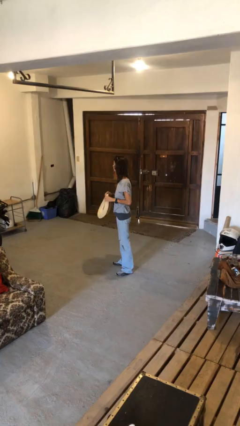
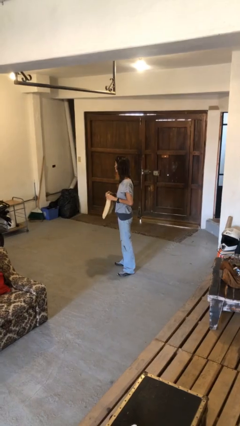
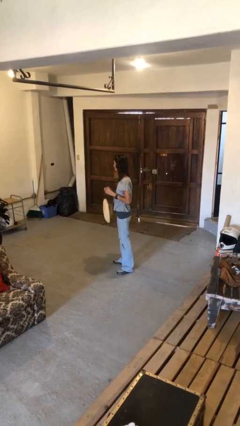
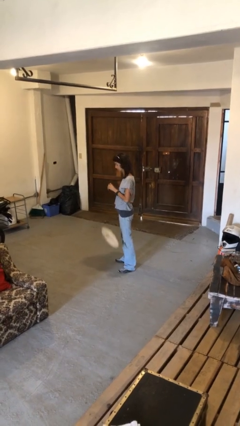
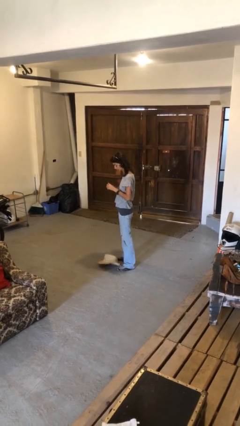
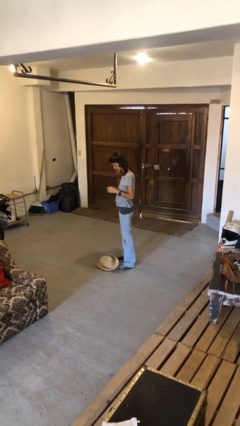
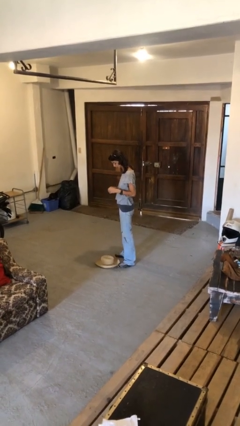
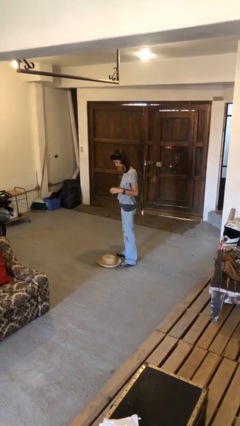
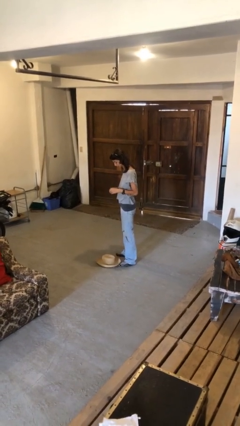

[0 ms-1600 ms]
person drops object

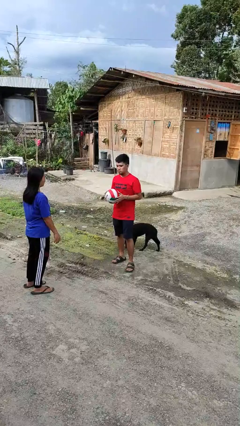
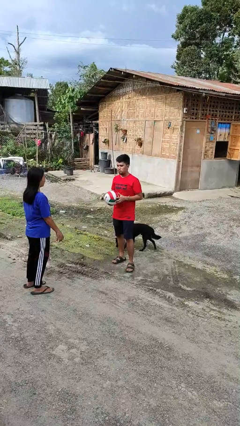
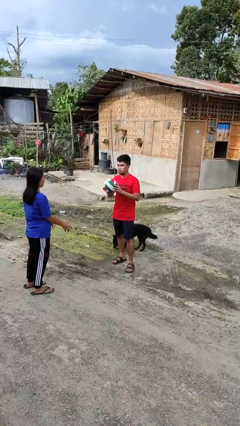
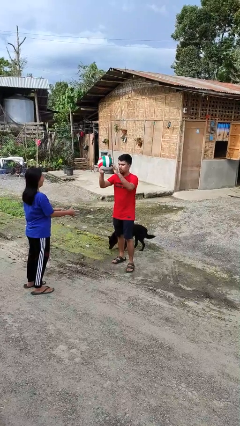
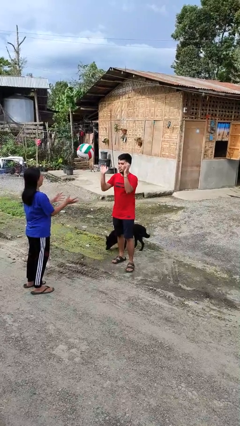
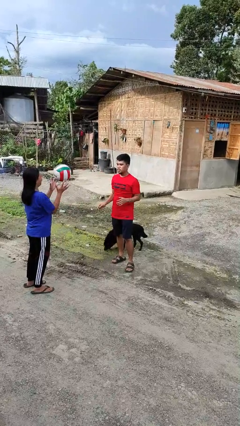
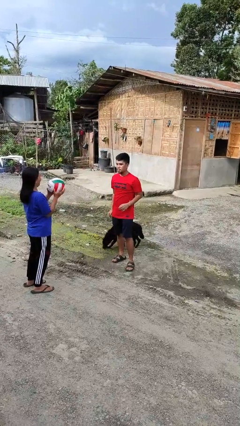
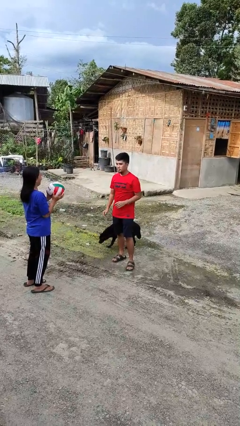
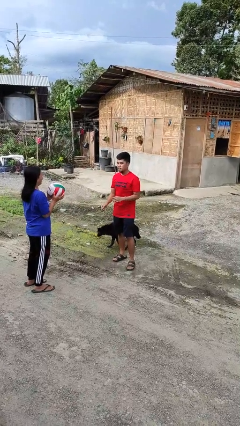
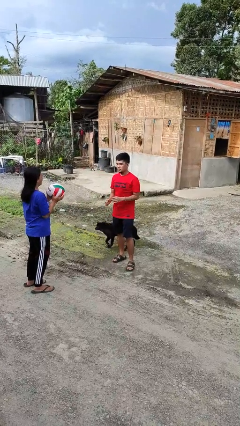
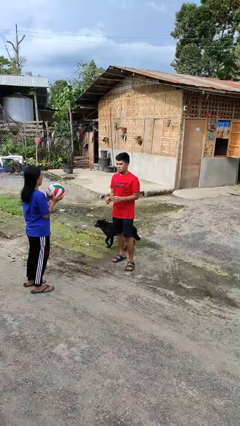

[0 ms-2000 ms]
person throws object to person

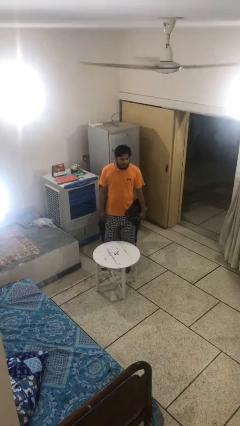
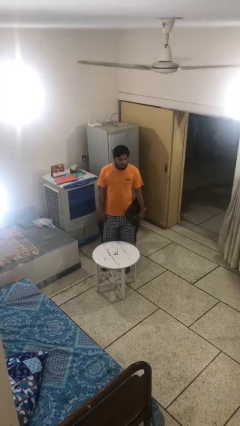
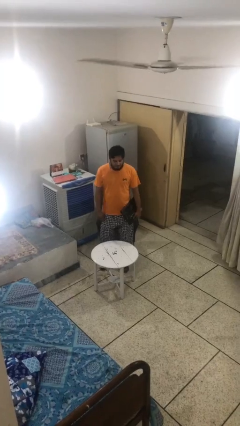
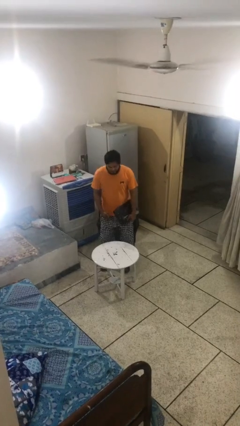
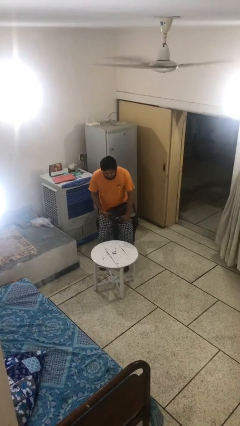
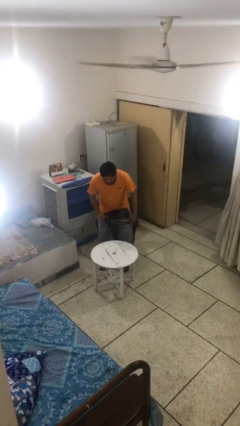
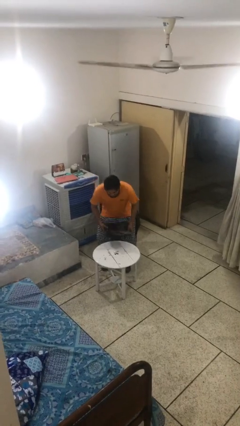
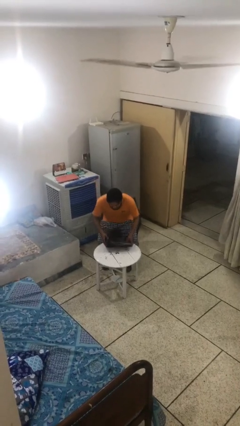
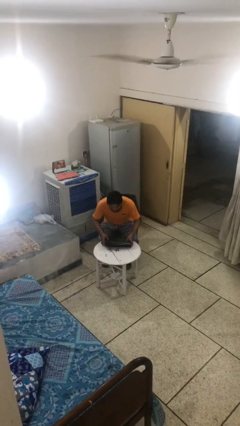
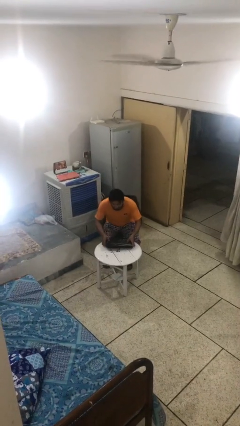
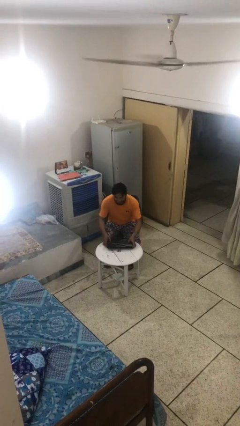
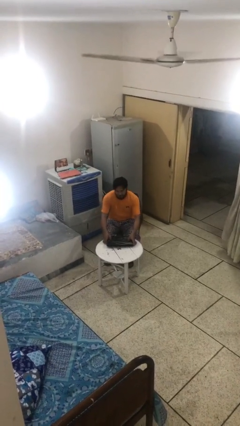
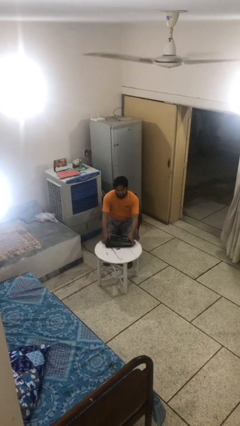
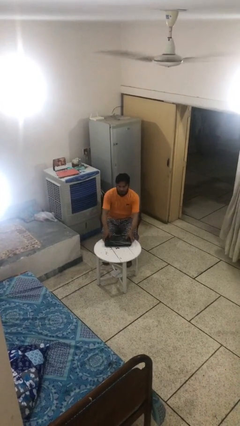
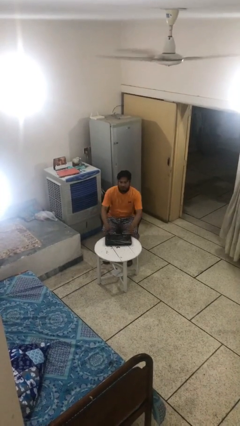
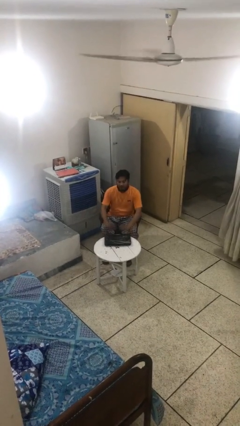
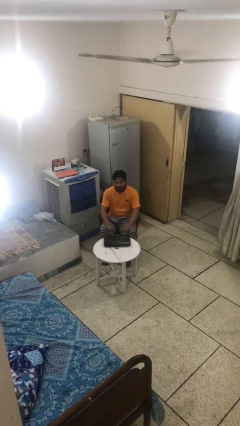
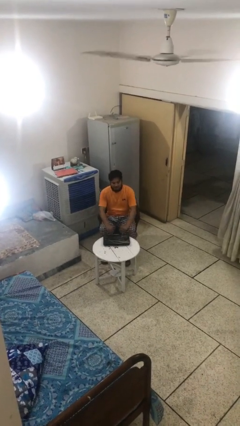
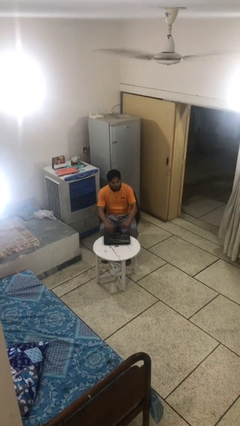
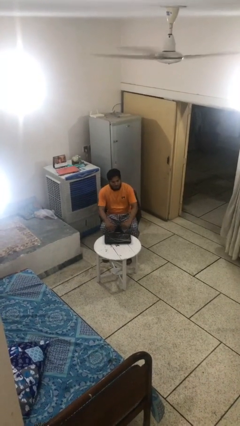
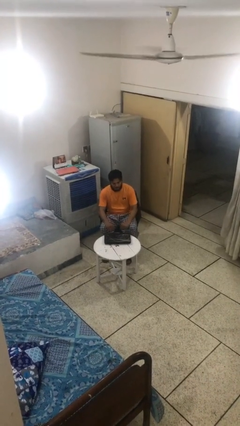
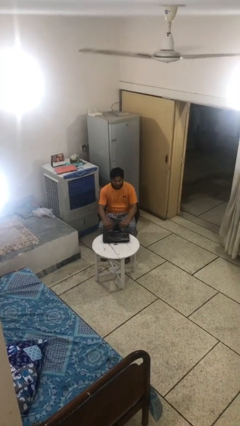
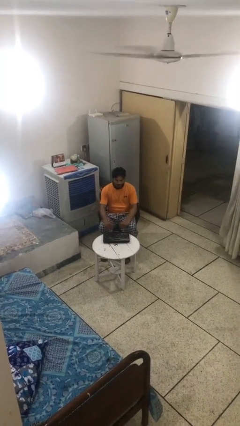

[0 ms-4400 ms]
person sits down

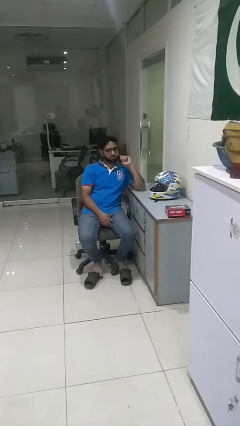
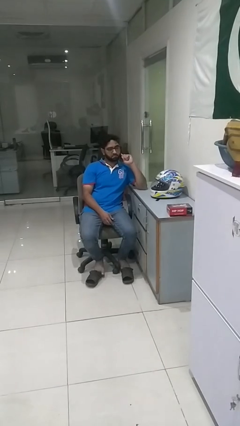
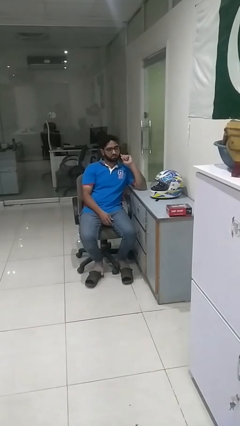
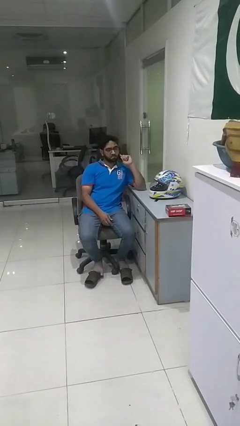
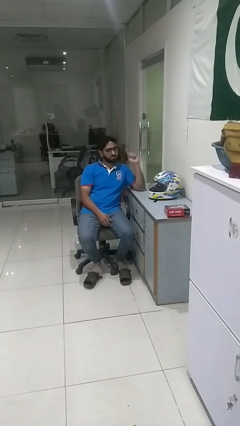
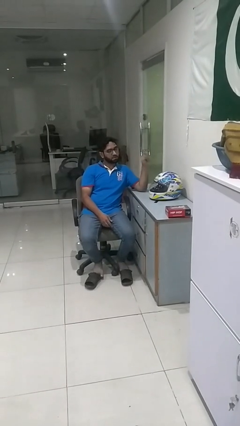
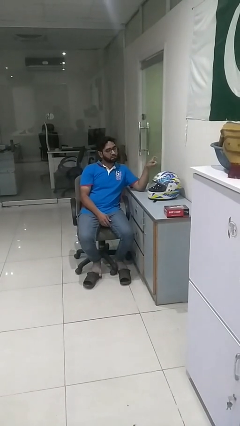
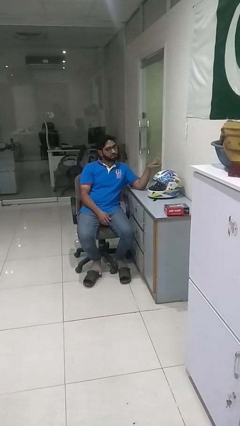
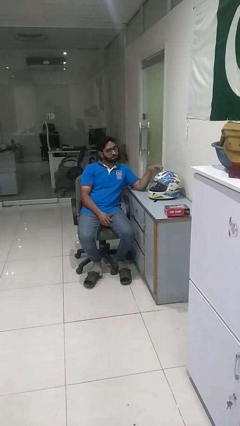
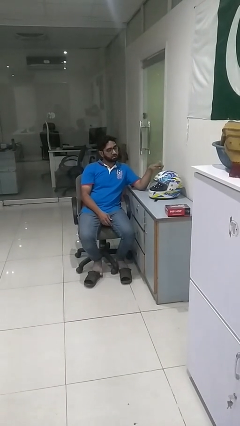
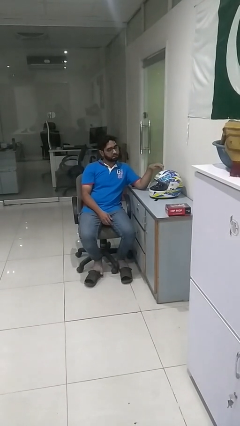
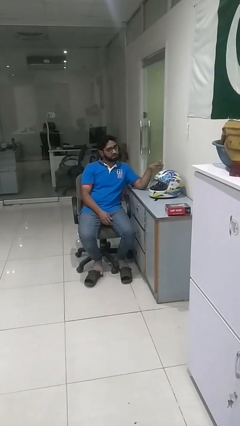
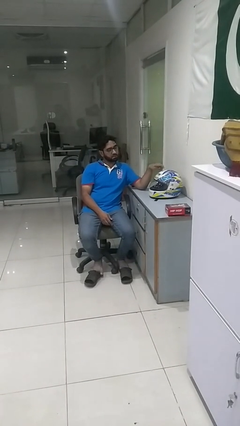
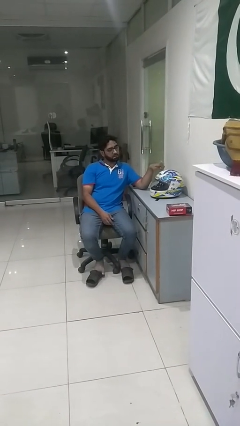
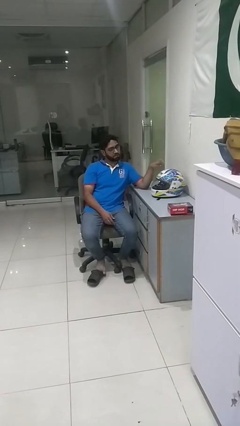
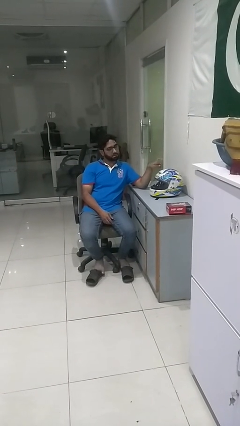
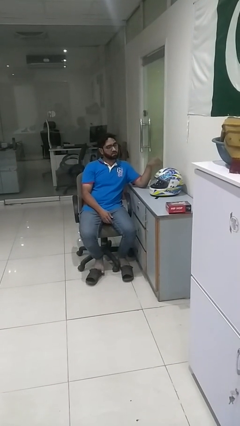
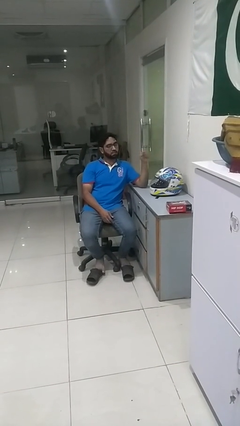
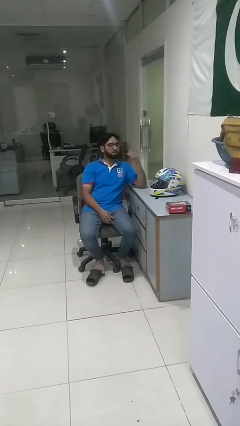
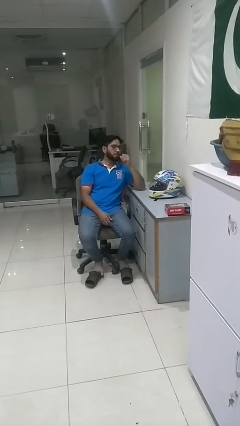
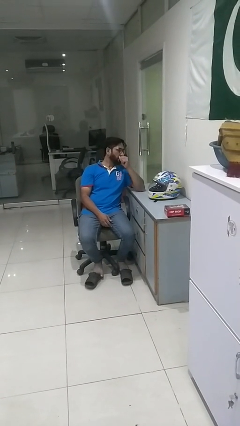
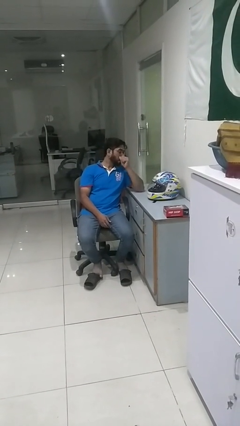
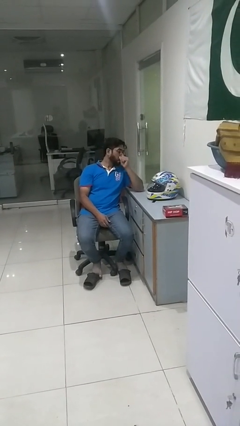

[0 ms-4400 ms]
person taps object with finger

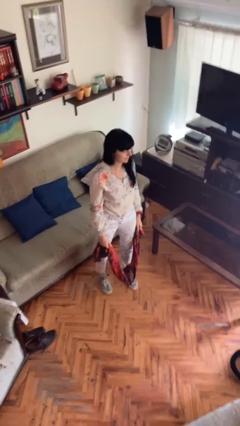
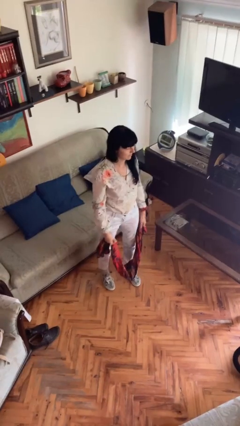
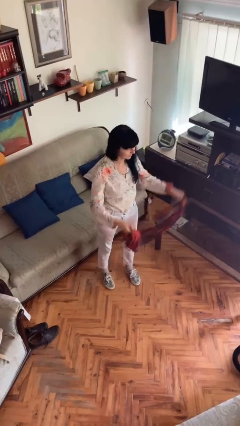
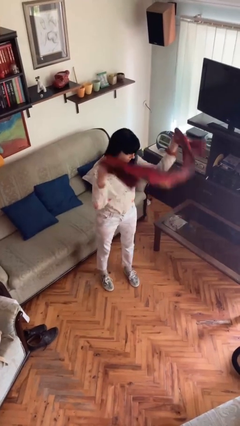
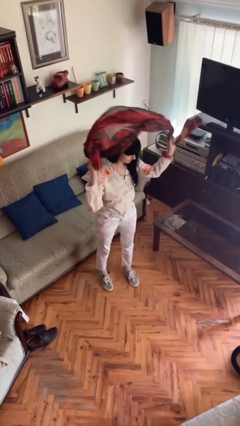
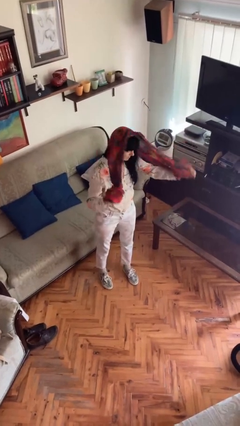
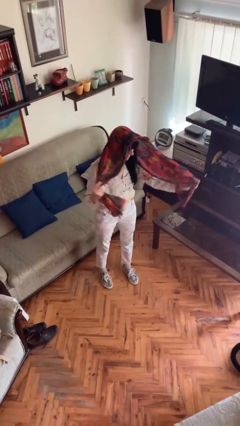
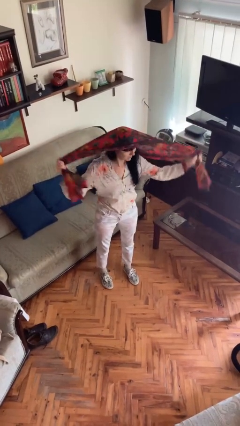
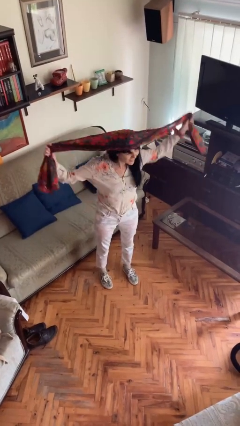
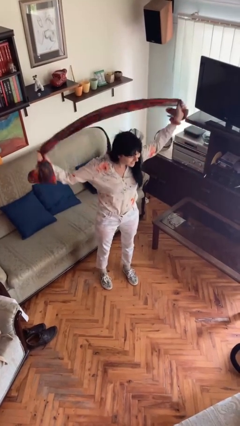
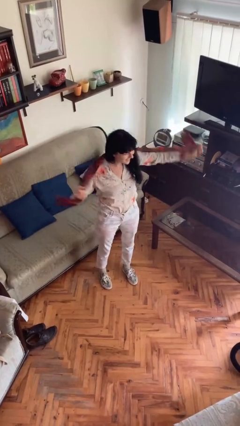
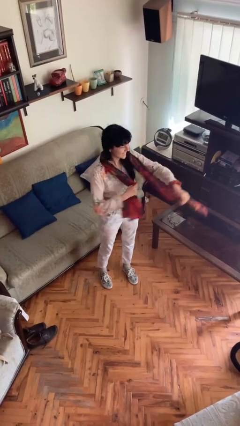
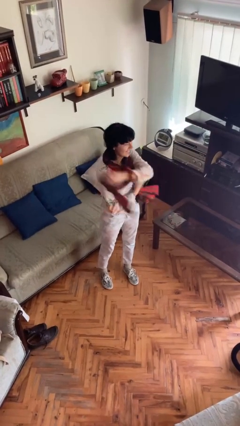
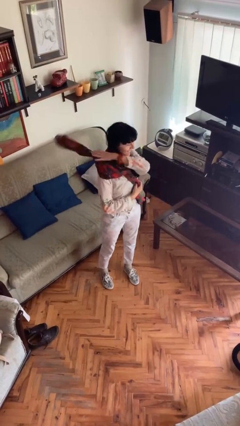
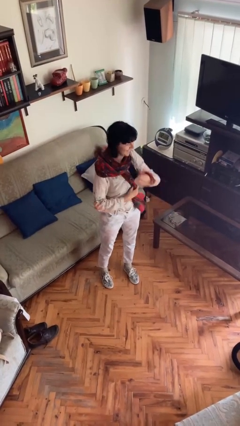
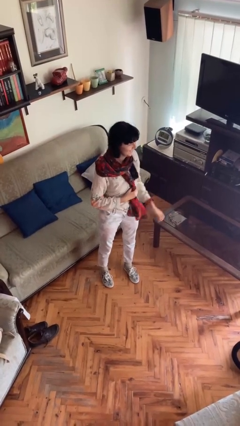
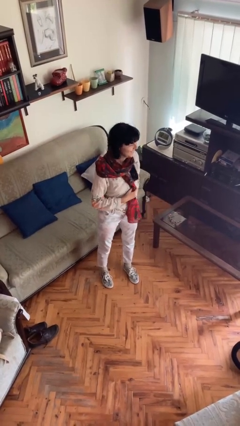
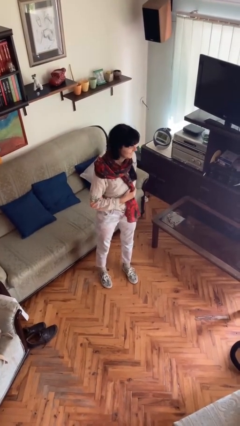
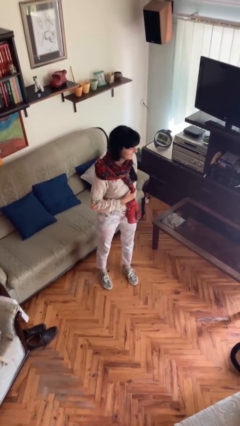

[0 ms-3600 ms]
person puts on scarf

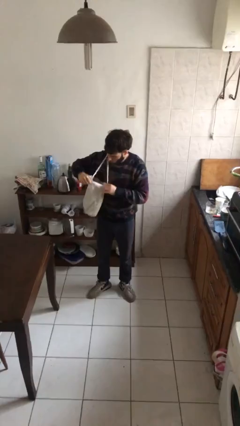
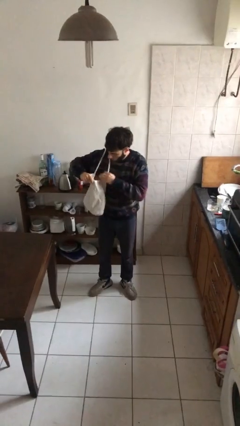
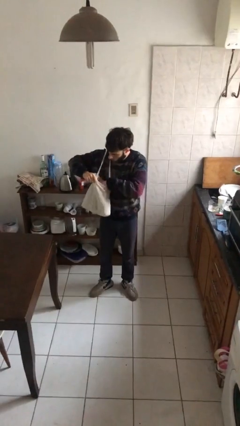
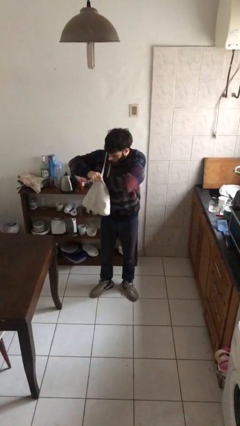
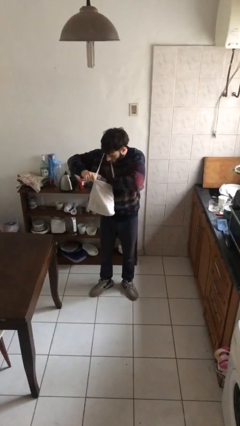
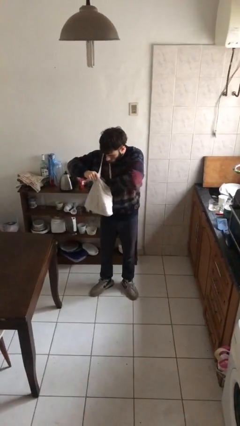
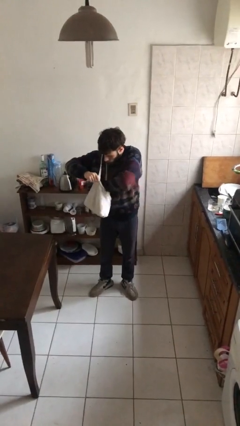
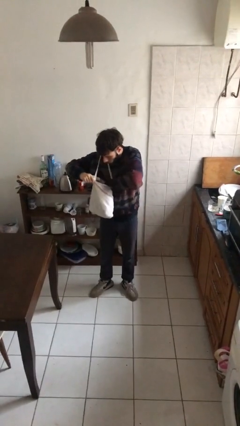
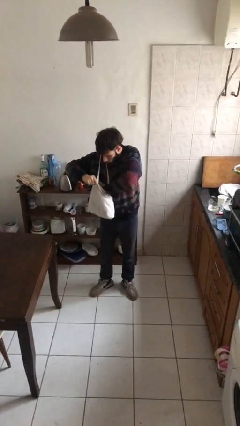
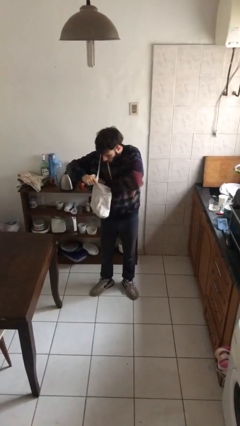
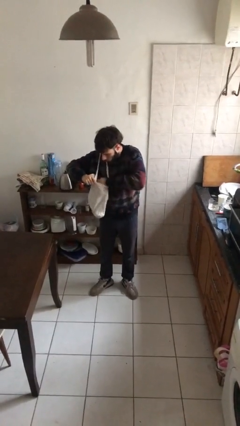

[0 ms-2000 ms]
person searches in purse
